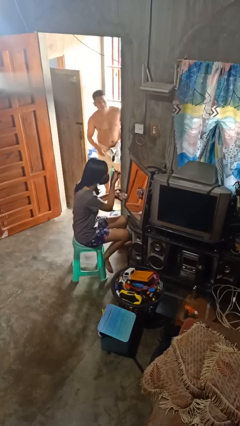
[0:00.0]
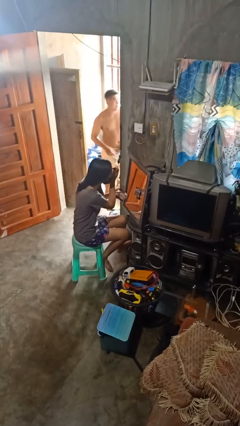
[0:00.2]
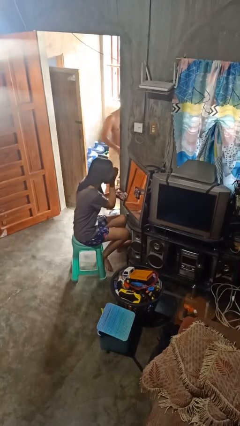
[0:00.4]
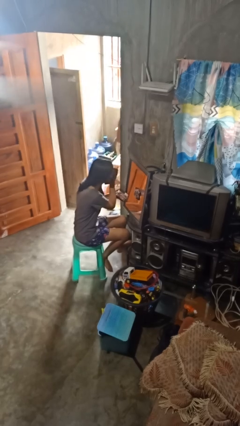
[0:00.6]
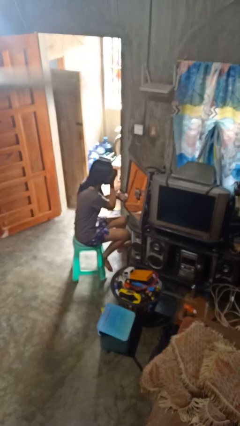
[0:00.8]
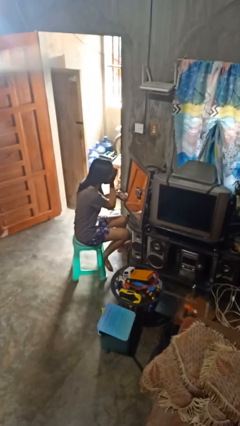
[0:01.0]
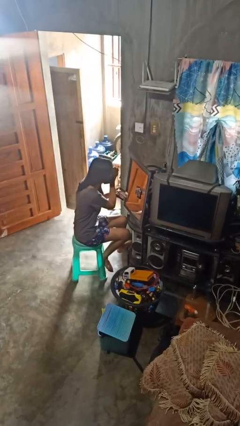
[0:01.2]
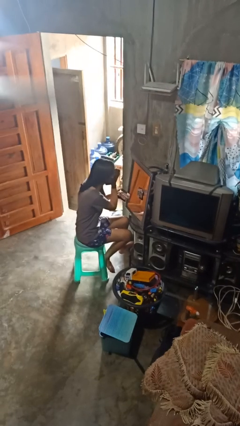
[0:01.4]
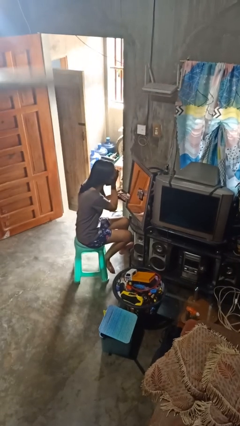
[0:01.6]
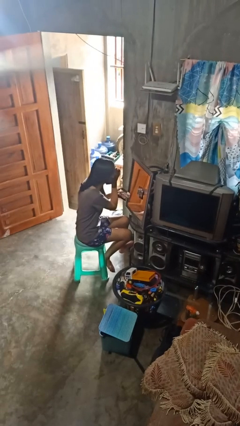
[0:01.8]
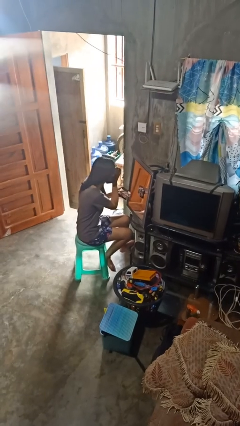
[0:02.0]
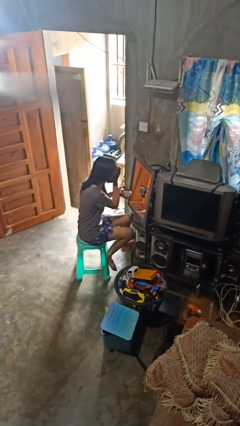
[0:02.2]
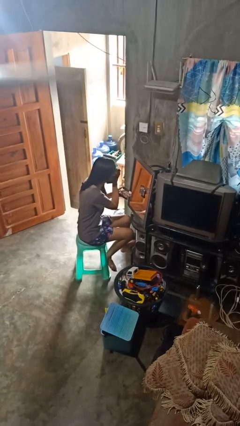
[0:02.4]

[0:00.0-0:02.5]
person applies eye makeup

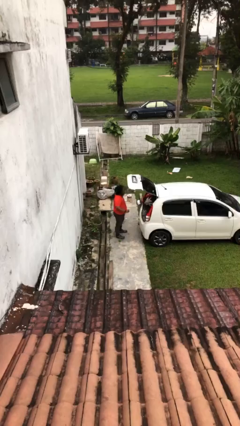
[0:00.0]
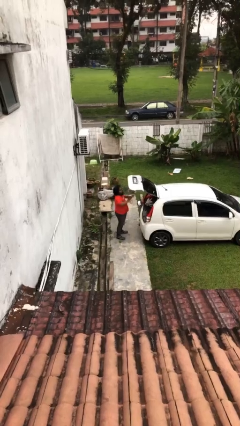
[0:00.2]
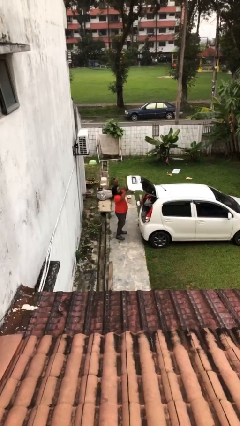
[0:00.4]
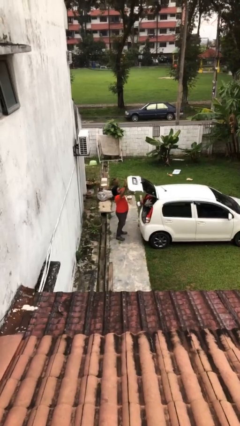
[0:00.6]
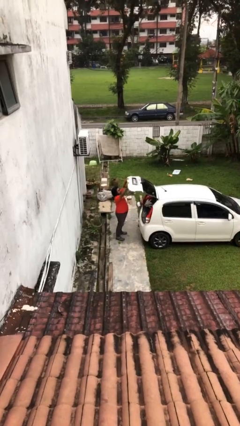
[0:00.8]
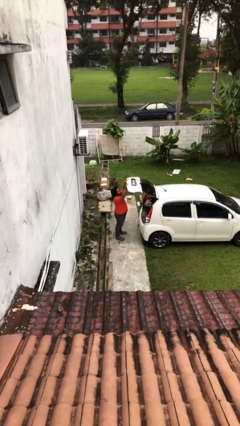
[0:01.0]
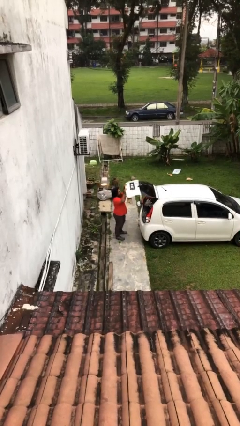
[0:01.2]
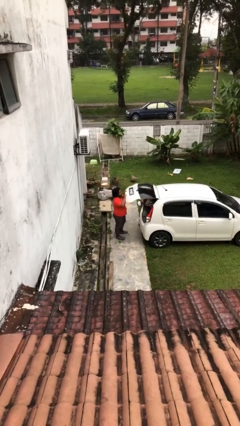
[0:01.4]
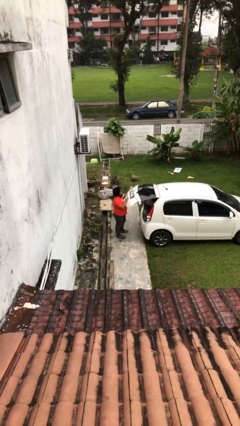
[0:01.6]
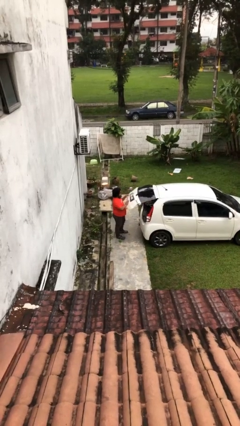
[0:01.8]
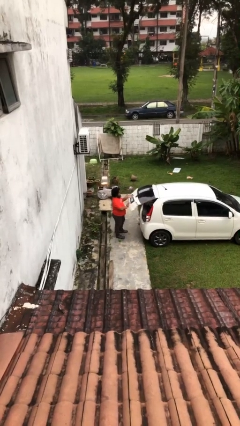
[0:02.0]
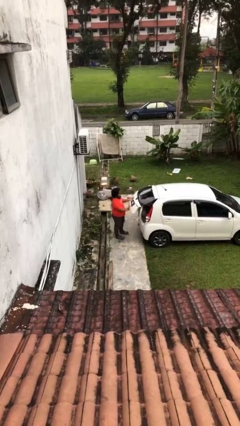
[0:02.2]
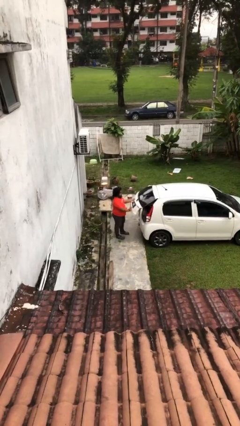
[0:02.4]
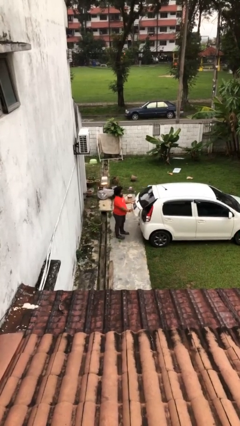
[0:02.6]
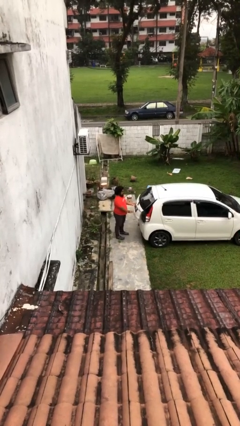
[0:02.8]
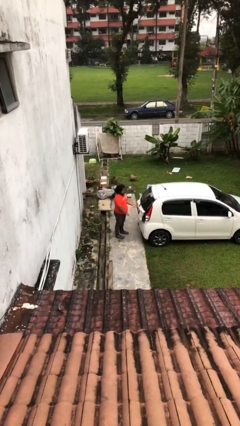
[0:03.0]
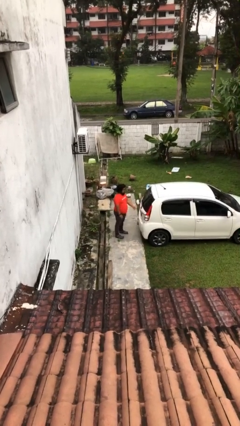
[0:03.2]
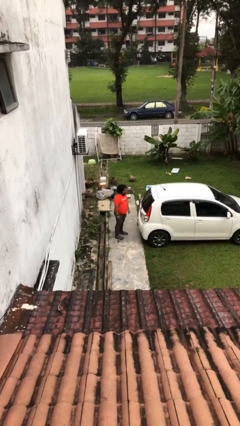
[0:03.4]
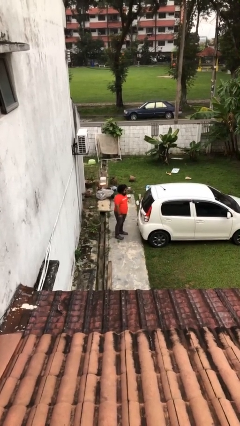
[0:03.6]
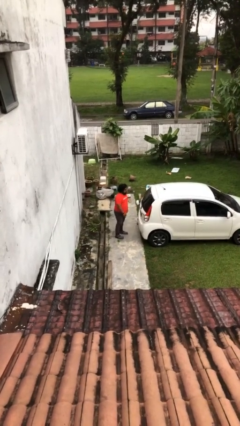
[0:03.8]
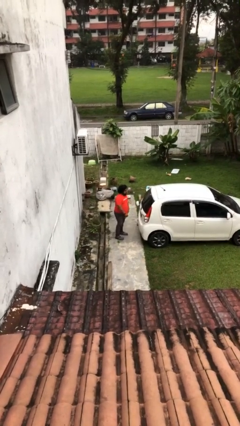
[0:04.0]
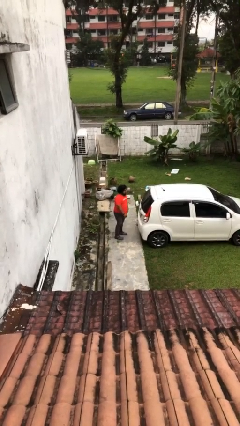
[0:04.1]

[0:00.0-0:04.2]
person closes car trunk

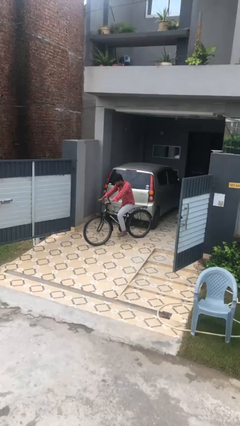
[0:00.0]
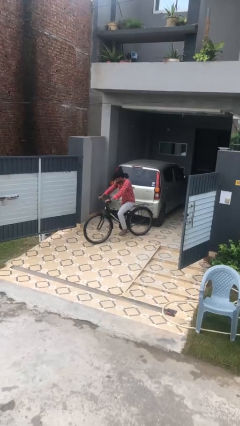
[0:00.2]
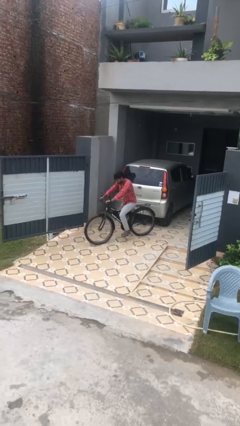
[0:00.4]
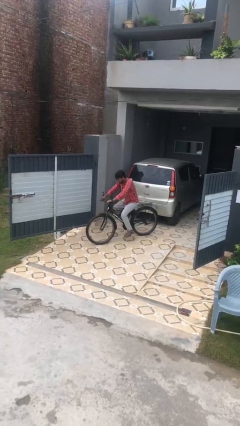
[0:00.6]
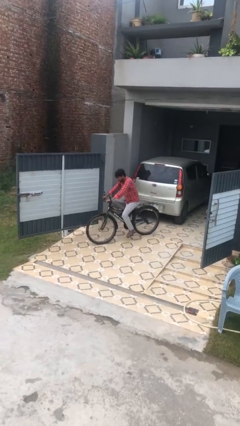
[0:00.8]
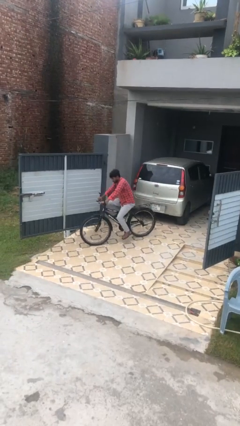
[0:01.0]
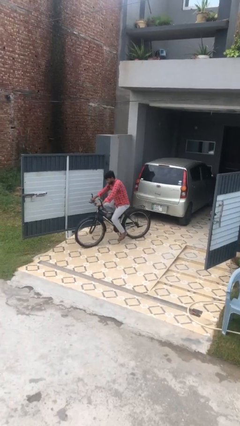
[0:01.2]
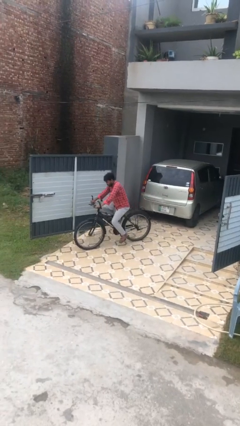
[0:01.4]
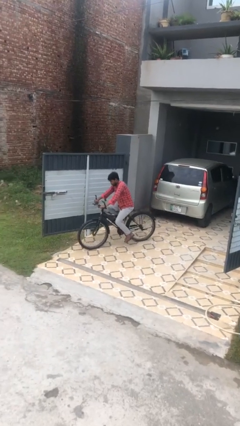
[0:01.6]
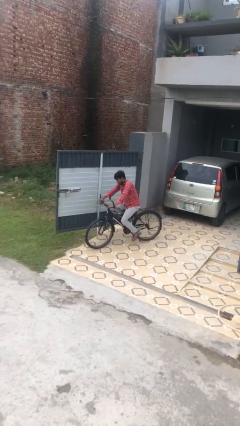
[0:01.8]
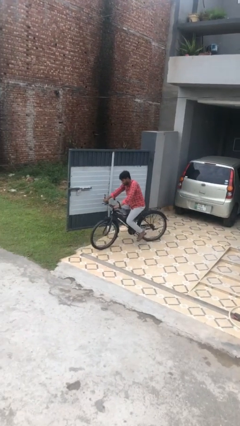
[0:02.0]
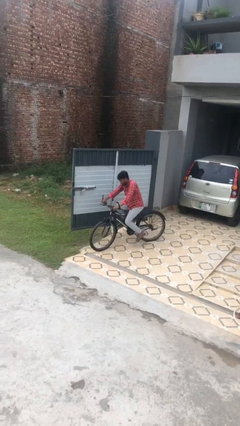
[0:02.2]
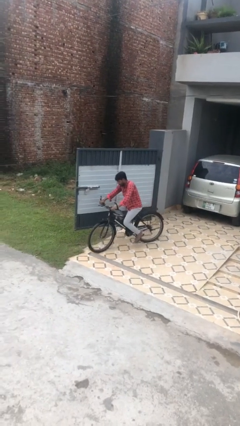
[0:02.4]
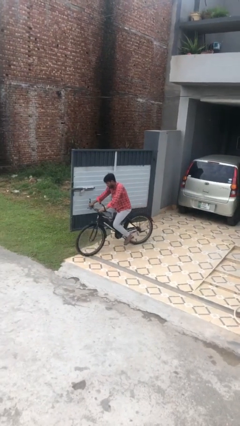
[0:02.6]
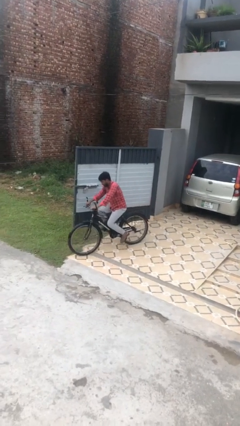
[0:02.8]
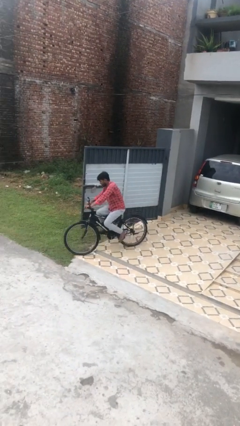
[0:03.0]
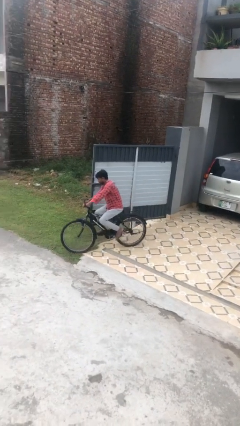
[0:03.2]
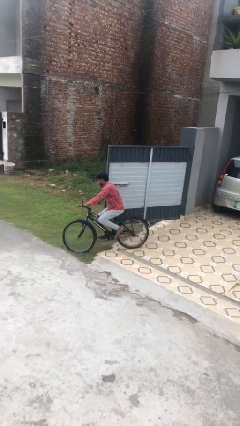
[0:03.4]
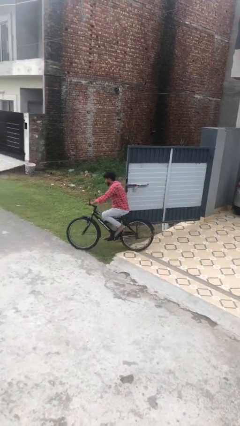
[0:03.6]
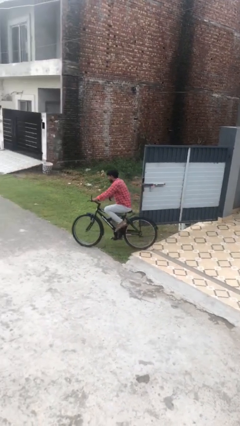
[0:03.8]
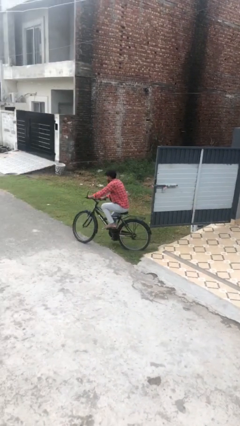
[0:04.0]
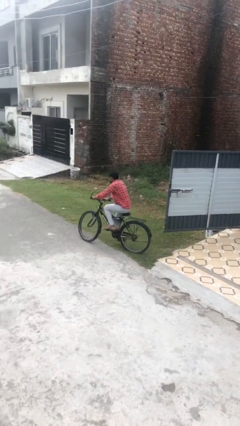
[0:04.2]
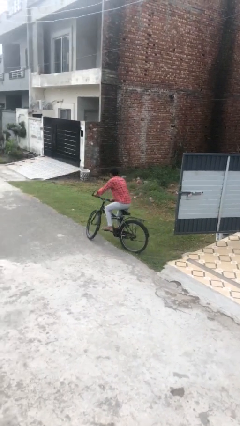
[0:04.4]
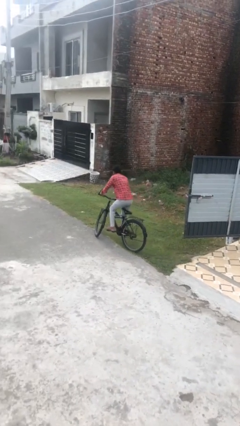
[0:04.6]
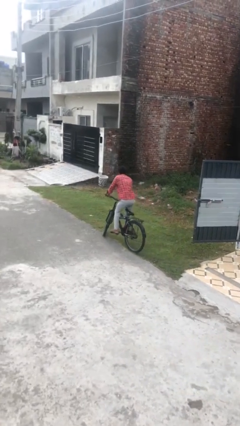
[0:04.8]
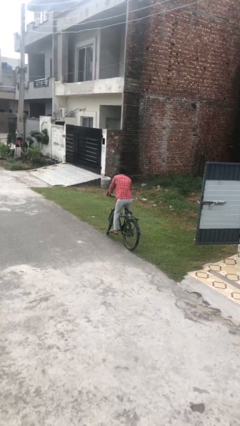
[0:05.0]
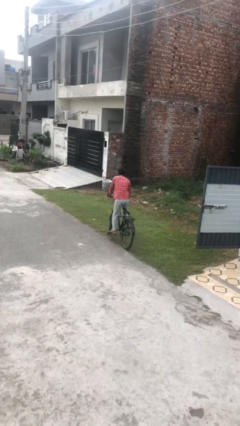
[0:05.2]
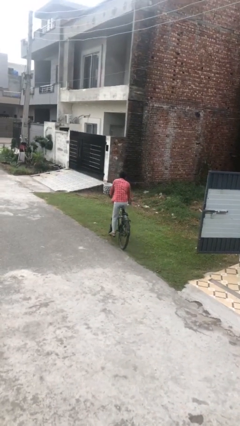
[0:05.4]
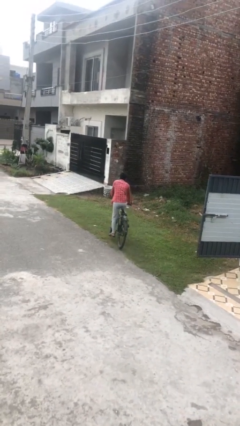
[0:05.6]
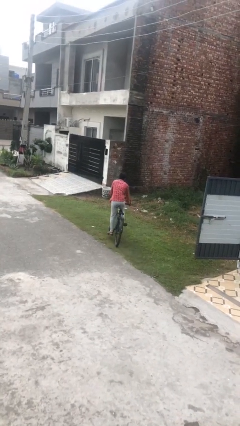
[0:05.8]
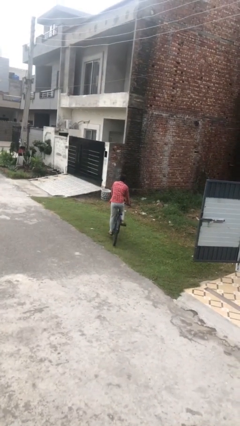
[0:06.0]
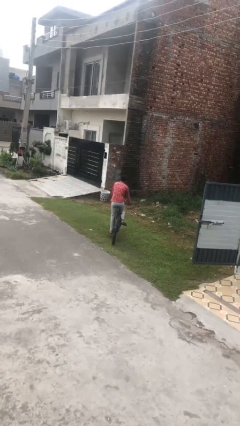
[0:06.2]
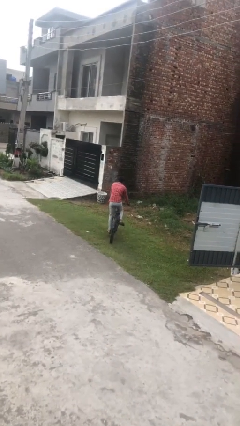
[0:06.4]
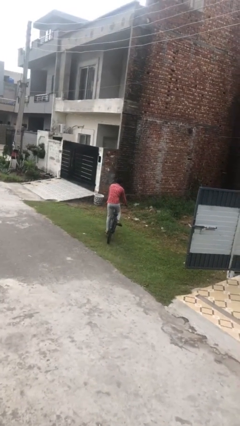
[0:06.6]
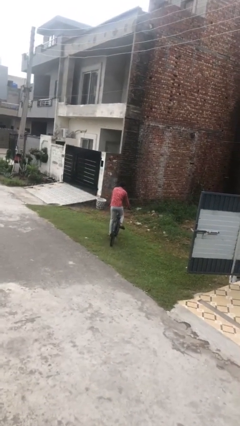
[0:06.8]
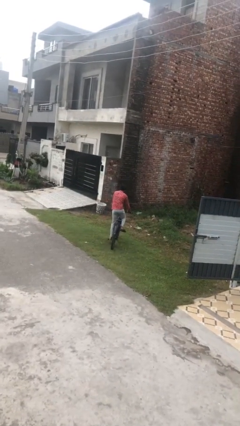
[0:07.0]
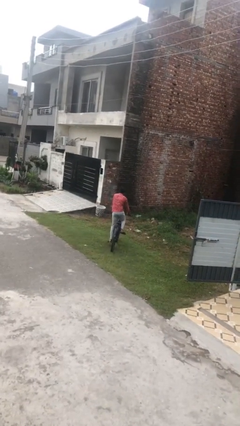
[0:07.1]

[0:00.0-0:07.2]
person rides bicycle

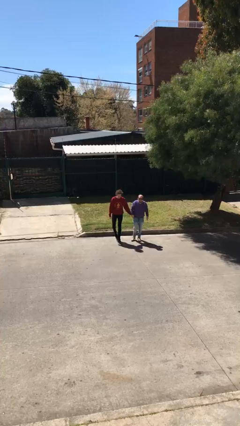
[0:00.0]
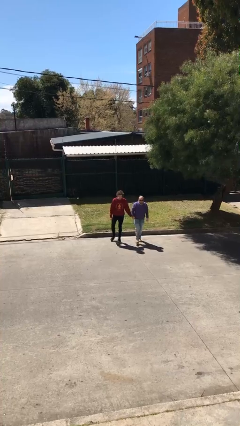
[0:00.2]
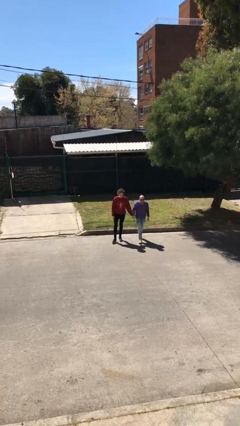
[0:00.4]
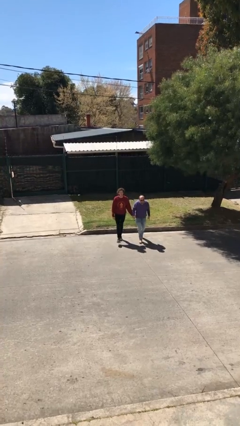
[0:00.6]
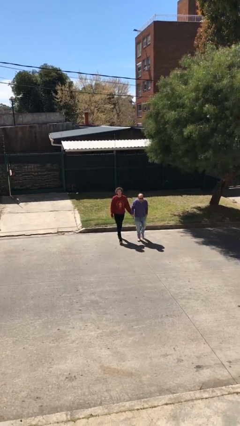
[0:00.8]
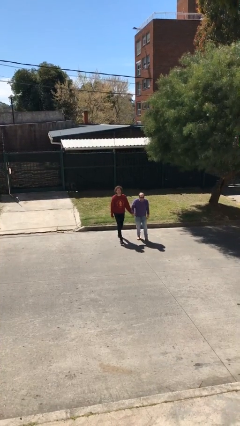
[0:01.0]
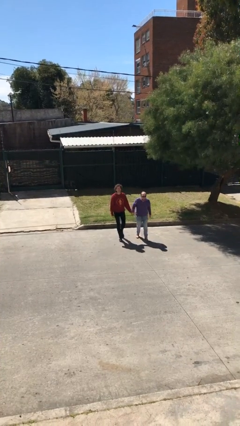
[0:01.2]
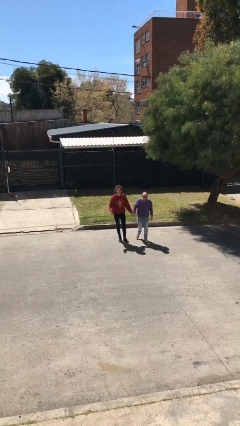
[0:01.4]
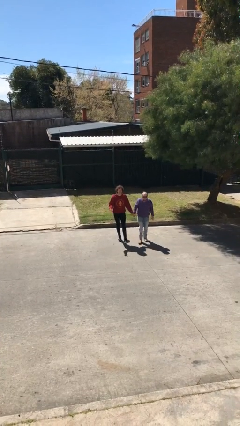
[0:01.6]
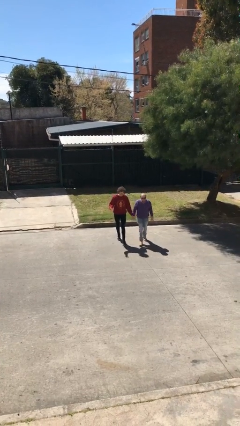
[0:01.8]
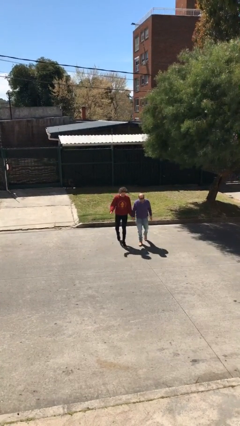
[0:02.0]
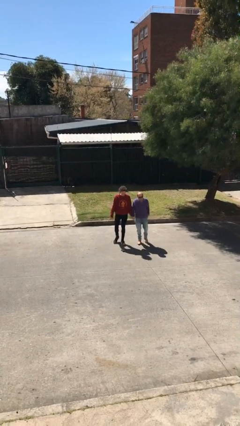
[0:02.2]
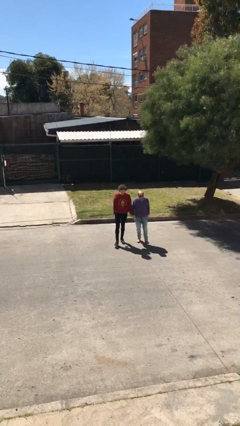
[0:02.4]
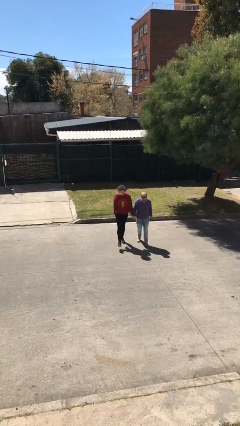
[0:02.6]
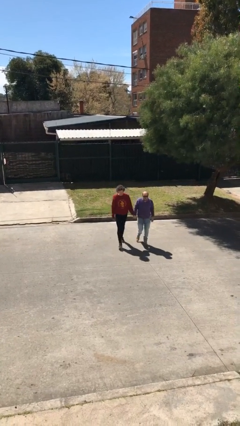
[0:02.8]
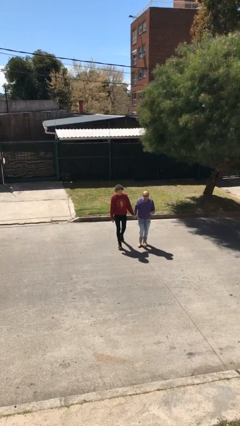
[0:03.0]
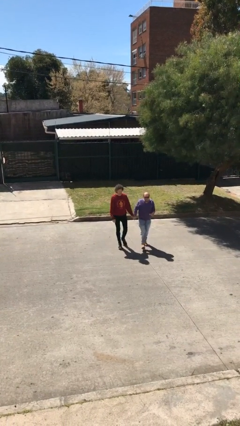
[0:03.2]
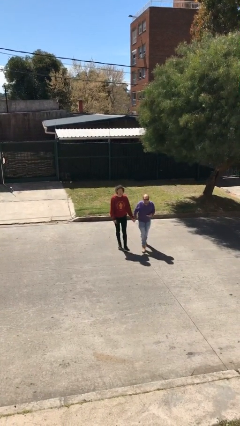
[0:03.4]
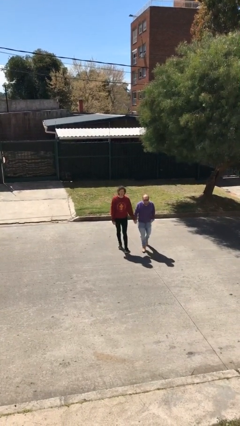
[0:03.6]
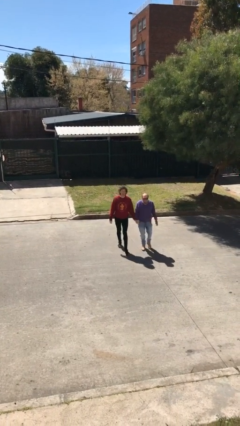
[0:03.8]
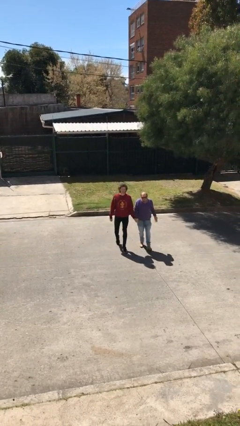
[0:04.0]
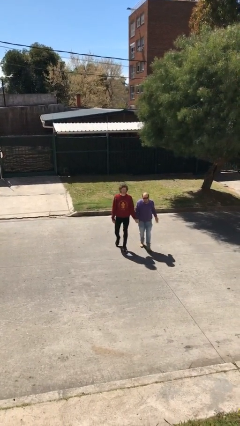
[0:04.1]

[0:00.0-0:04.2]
person holds hand
